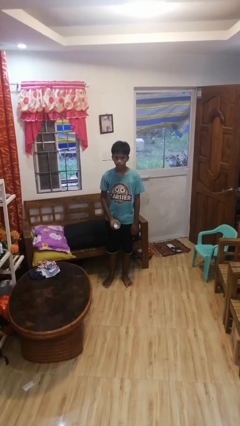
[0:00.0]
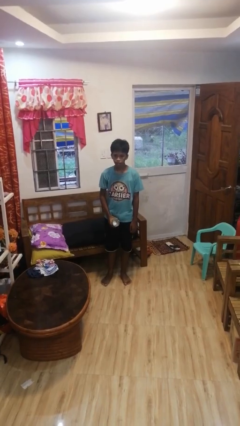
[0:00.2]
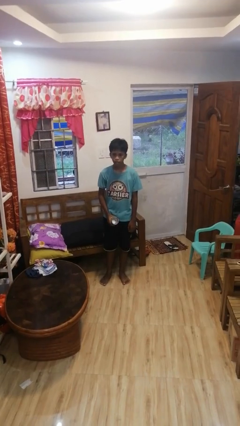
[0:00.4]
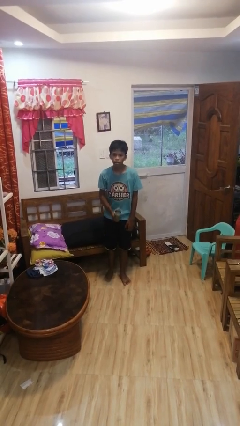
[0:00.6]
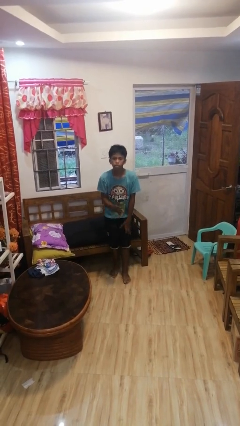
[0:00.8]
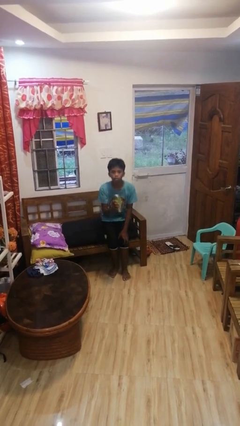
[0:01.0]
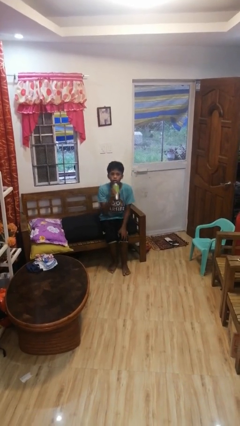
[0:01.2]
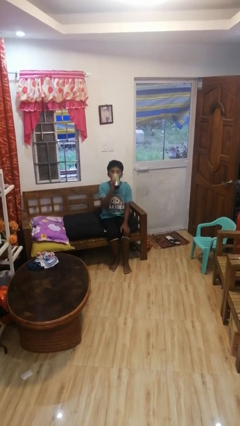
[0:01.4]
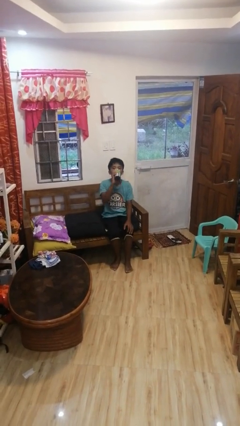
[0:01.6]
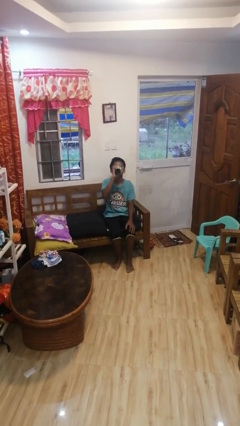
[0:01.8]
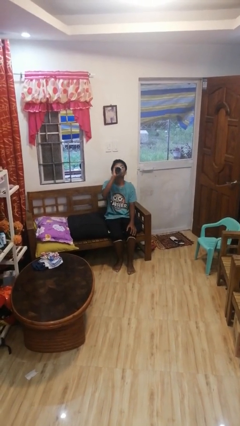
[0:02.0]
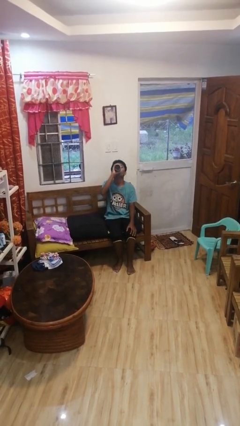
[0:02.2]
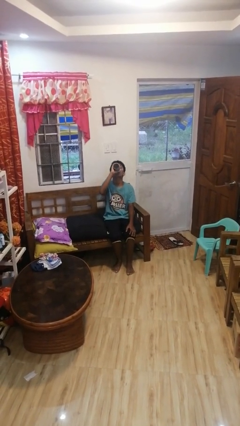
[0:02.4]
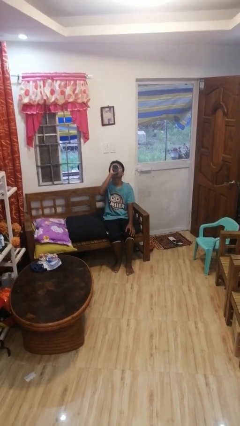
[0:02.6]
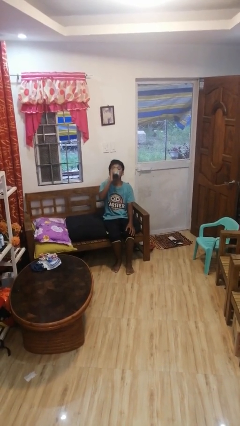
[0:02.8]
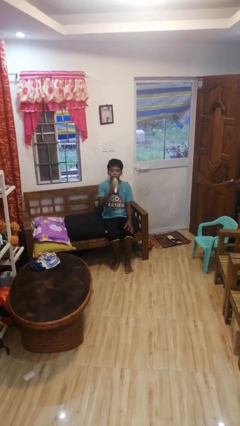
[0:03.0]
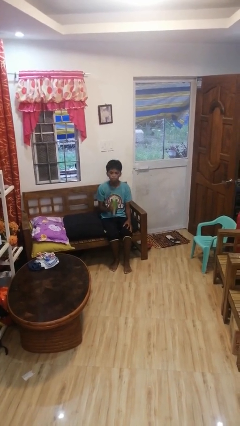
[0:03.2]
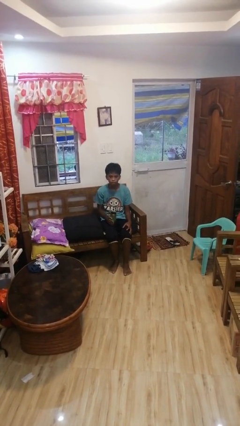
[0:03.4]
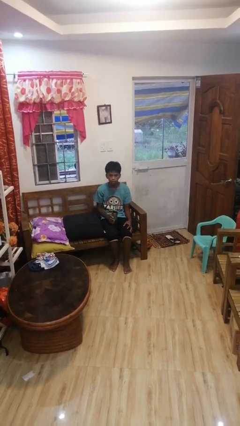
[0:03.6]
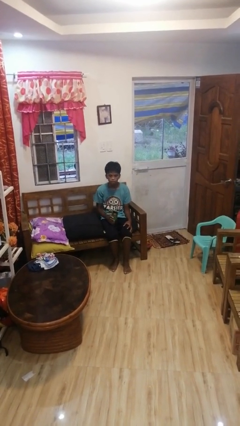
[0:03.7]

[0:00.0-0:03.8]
person drinks from bottle

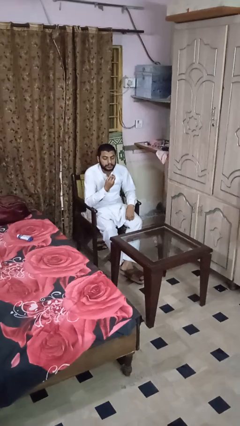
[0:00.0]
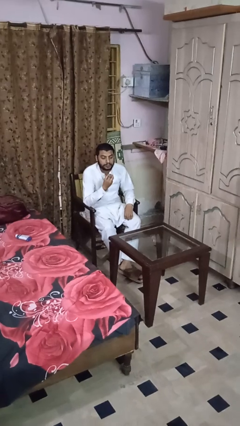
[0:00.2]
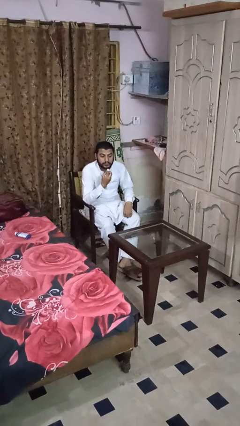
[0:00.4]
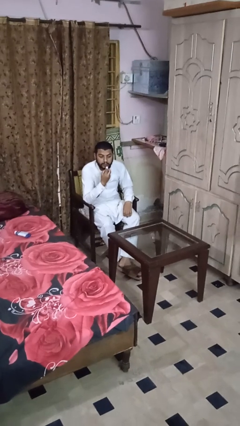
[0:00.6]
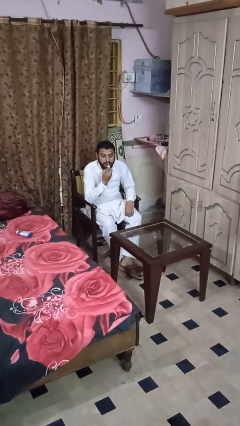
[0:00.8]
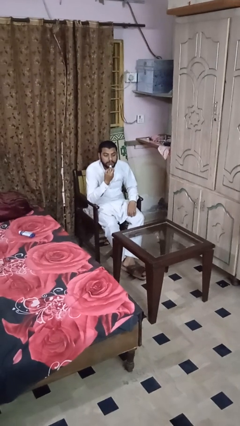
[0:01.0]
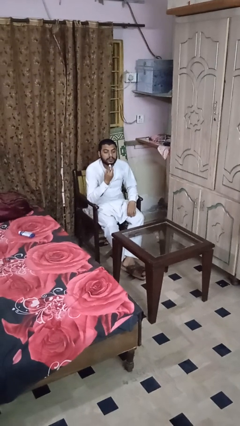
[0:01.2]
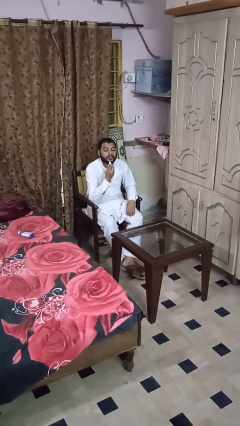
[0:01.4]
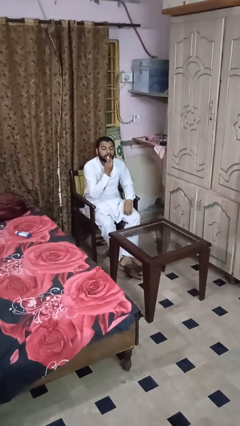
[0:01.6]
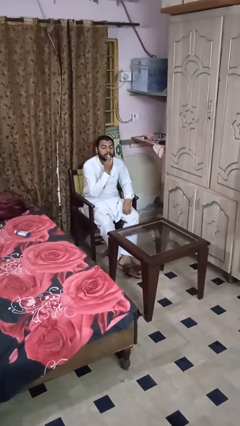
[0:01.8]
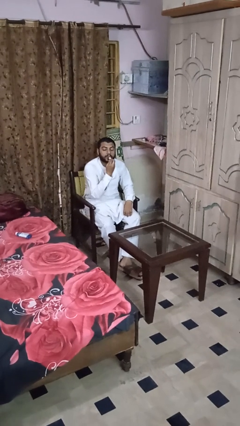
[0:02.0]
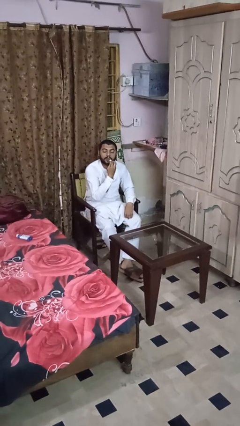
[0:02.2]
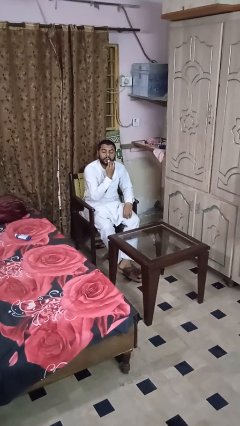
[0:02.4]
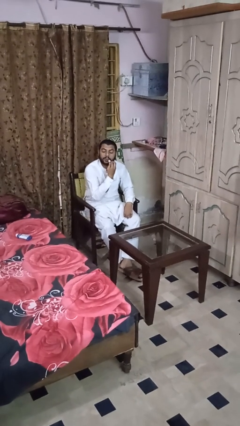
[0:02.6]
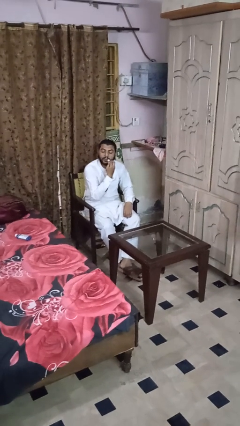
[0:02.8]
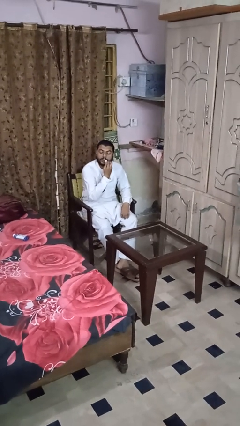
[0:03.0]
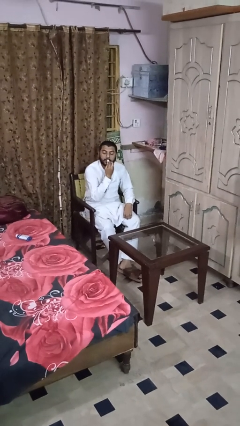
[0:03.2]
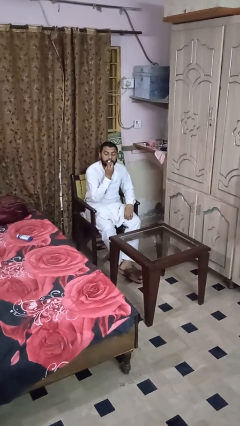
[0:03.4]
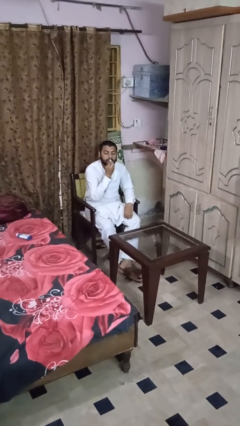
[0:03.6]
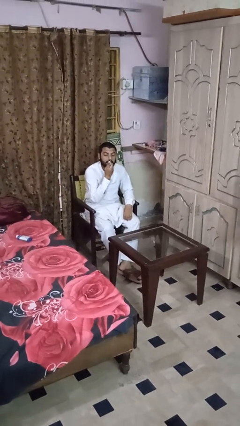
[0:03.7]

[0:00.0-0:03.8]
person applies lip makeup

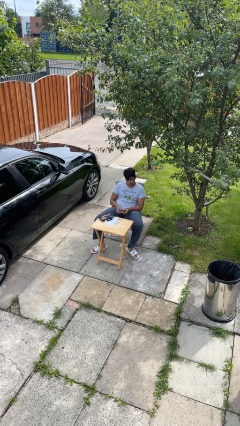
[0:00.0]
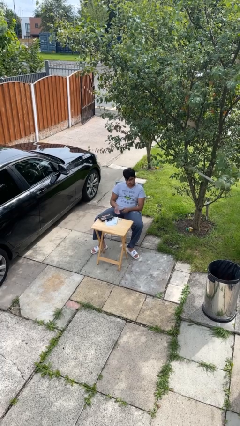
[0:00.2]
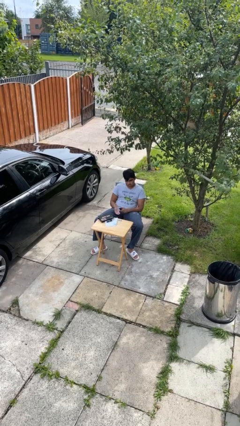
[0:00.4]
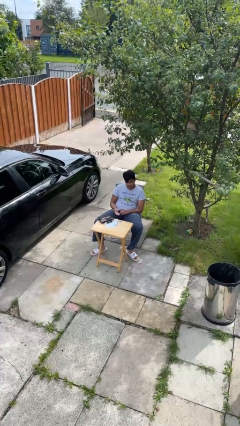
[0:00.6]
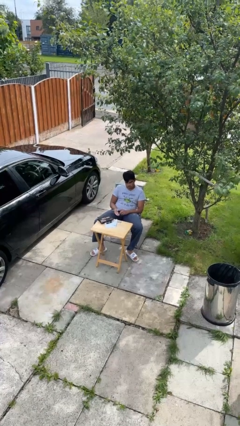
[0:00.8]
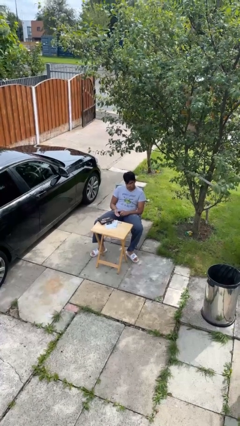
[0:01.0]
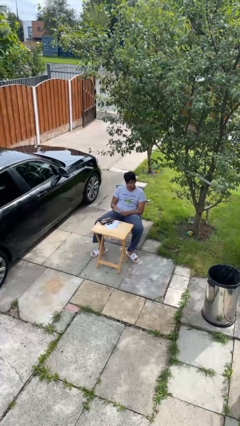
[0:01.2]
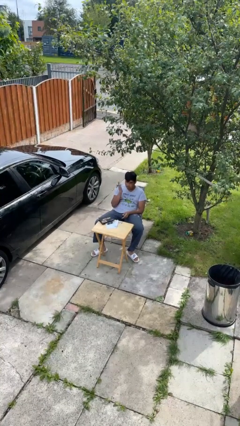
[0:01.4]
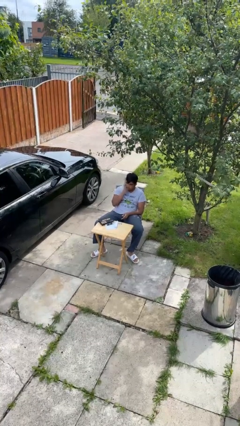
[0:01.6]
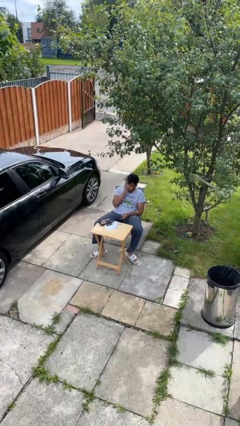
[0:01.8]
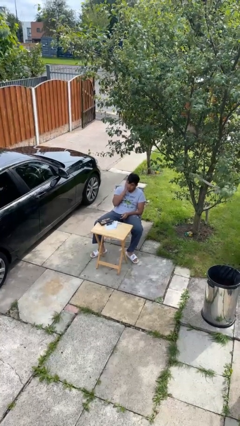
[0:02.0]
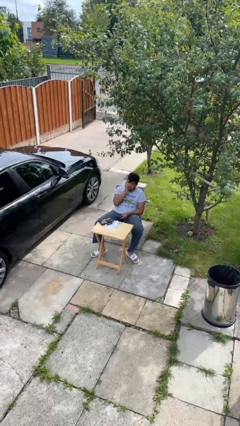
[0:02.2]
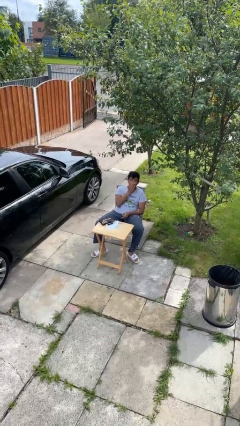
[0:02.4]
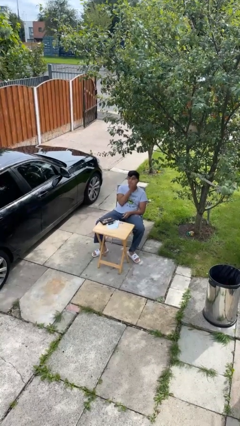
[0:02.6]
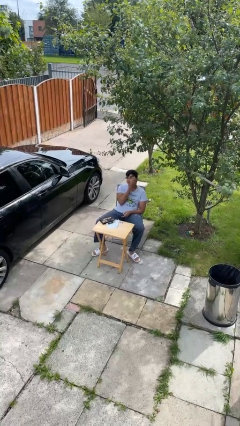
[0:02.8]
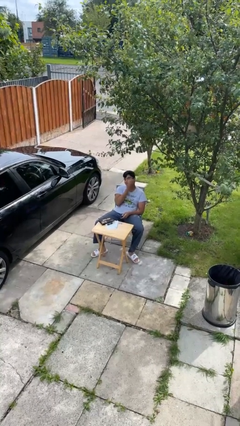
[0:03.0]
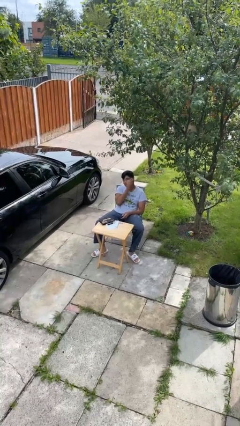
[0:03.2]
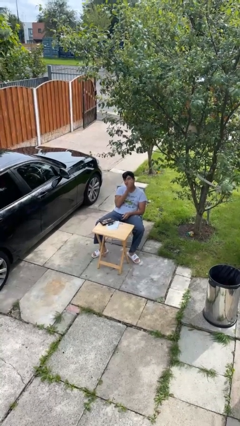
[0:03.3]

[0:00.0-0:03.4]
person applies foundation makeup

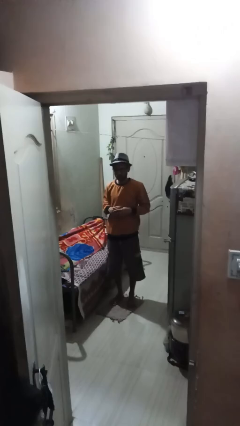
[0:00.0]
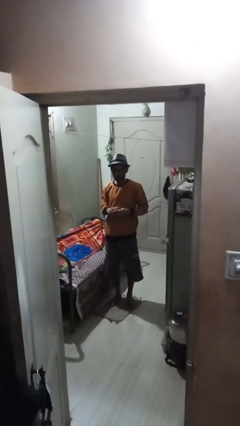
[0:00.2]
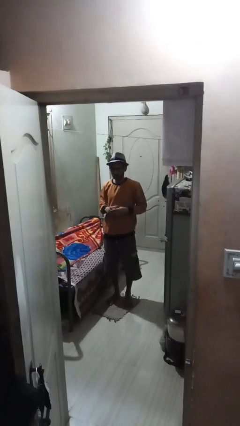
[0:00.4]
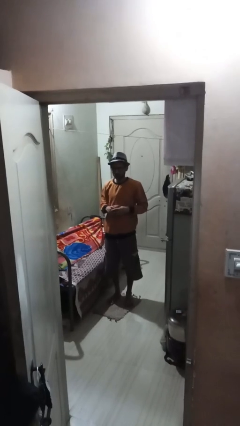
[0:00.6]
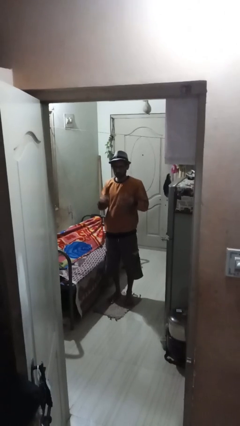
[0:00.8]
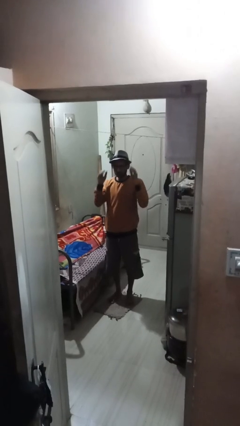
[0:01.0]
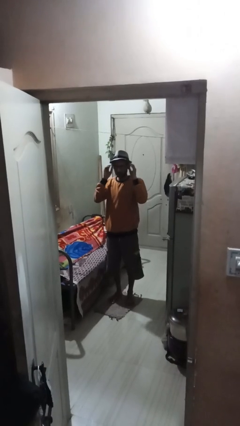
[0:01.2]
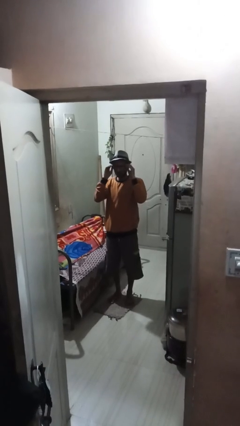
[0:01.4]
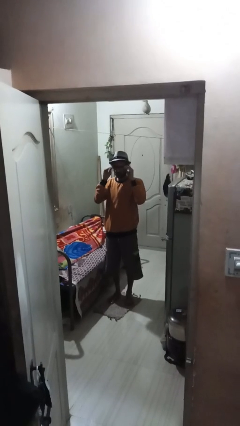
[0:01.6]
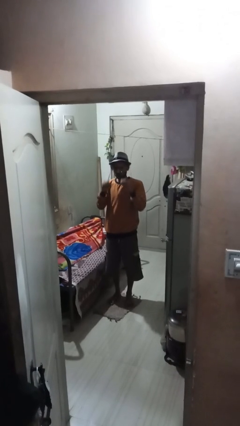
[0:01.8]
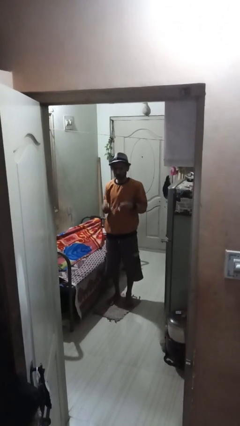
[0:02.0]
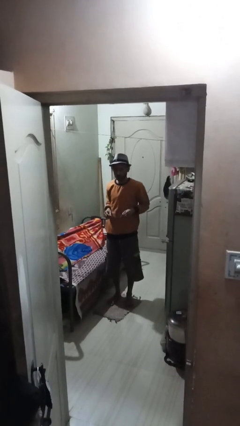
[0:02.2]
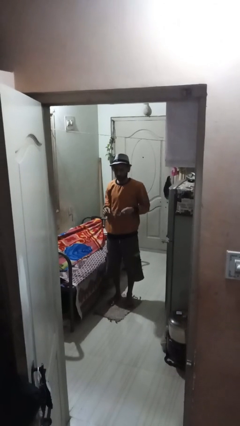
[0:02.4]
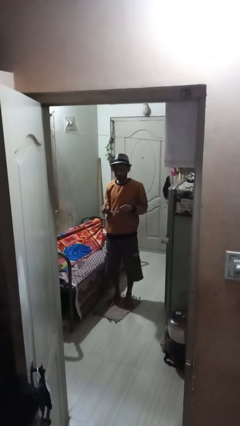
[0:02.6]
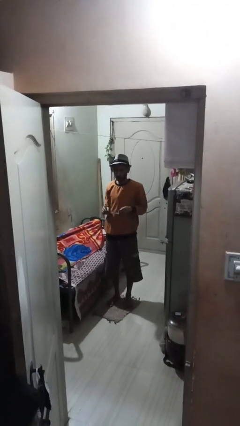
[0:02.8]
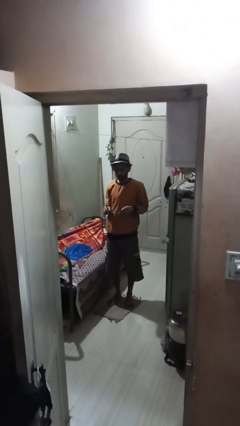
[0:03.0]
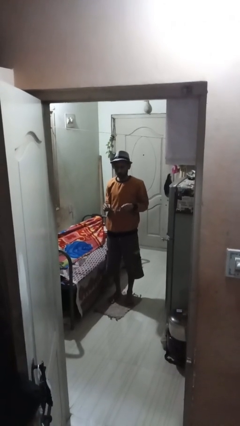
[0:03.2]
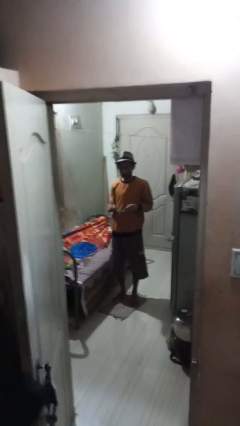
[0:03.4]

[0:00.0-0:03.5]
person takes off glasses

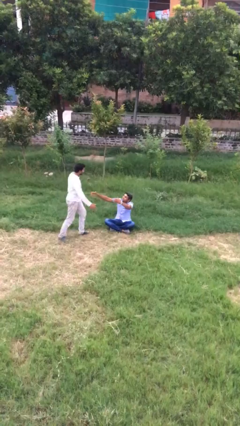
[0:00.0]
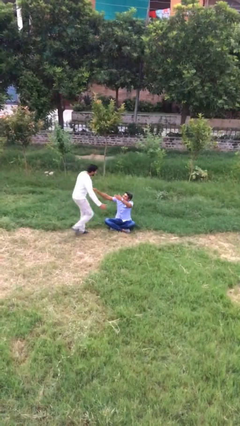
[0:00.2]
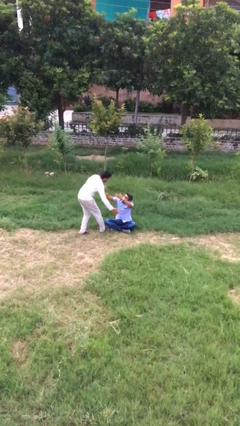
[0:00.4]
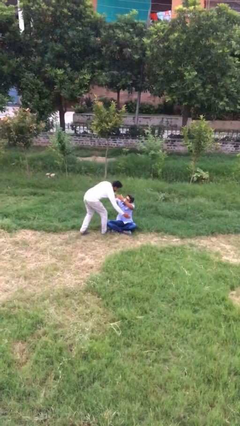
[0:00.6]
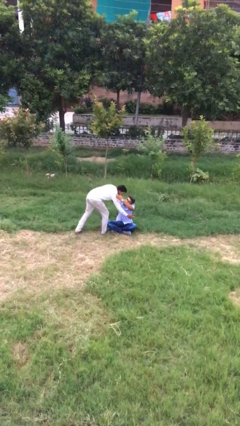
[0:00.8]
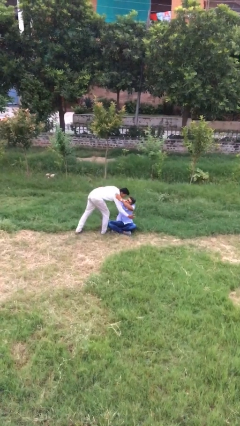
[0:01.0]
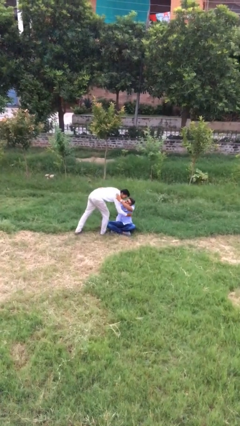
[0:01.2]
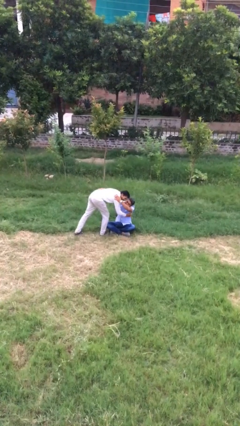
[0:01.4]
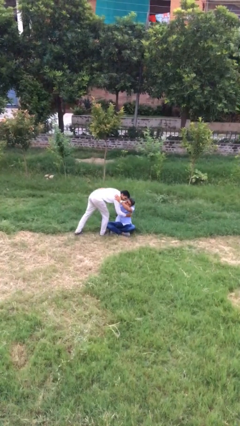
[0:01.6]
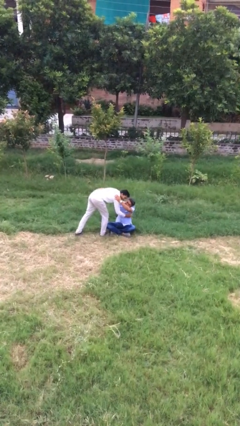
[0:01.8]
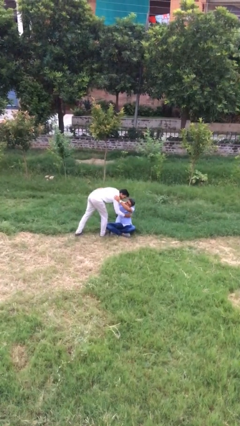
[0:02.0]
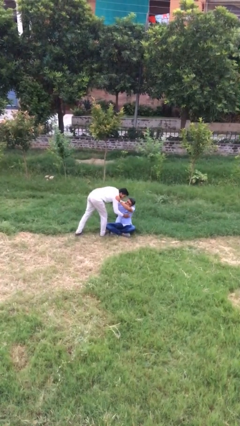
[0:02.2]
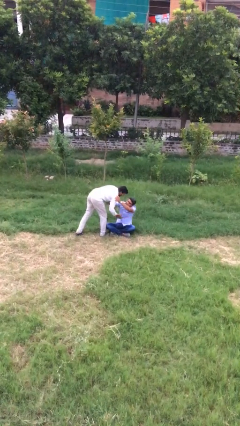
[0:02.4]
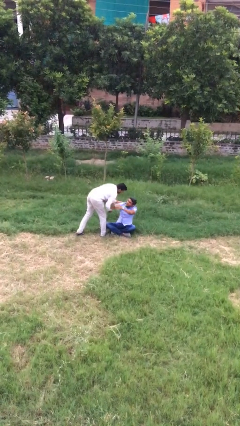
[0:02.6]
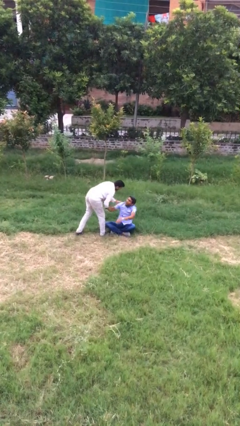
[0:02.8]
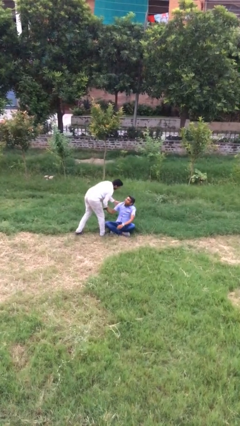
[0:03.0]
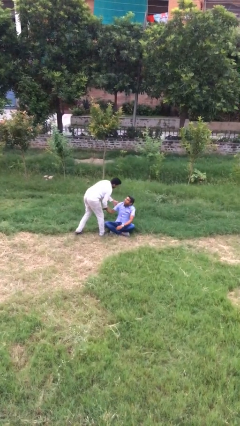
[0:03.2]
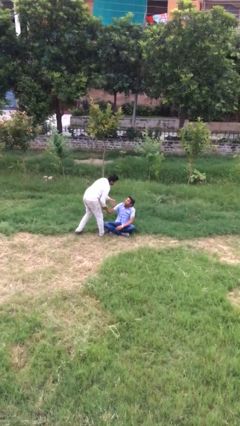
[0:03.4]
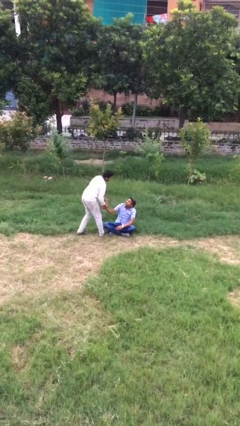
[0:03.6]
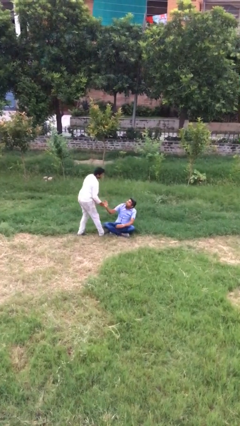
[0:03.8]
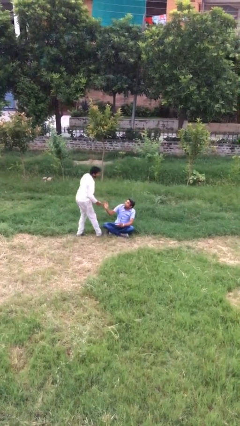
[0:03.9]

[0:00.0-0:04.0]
person embraces person
